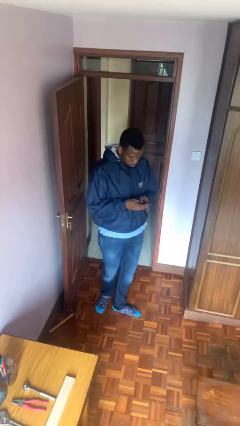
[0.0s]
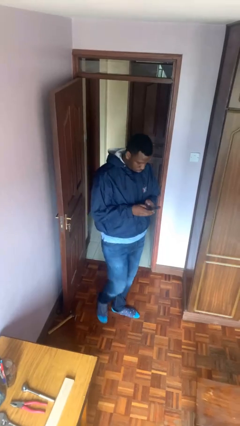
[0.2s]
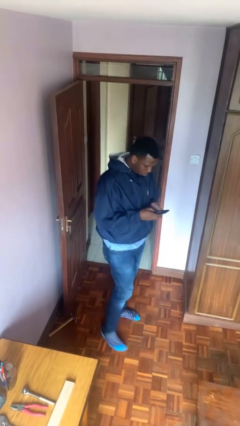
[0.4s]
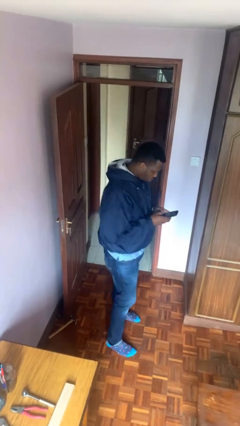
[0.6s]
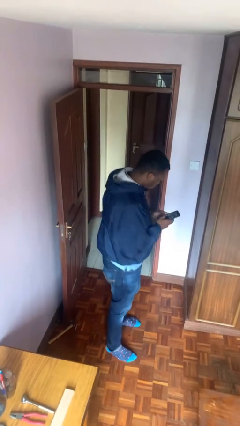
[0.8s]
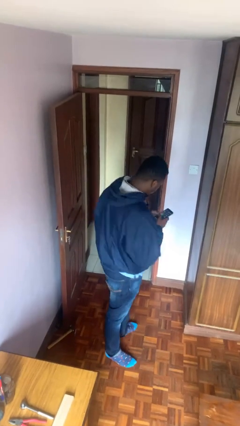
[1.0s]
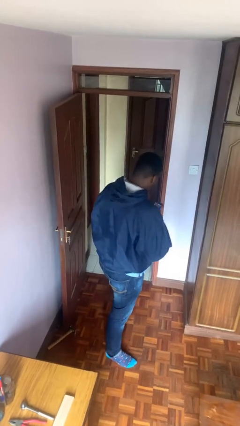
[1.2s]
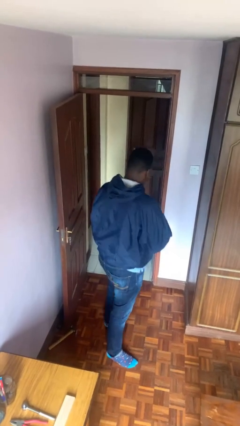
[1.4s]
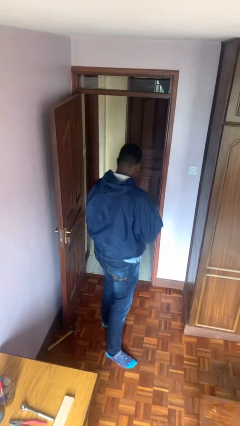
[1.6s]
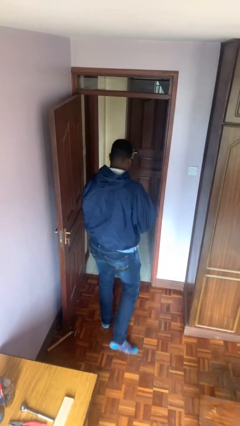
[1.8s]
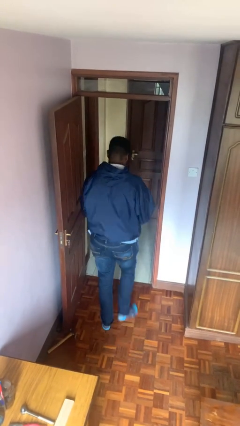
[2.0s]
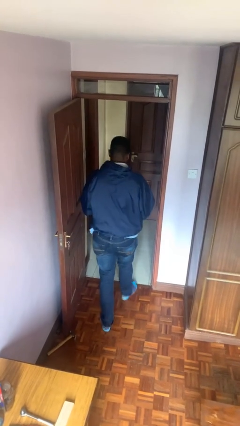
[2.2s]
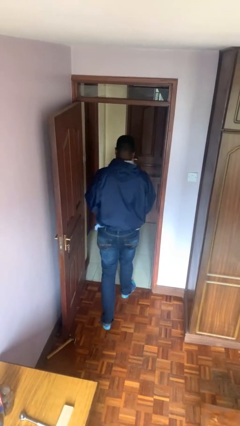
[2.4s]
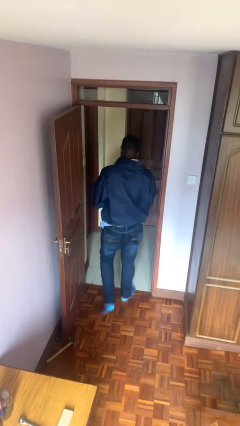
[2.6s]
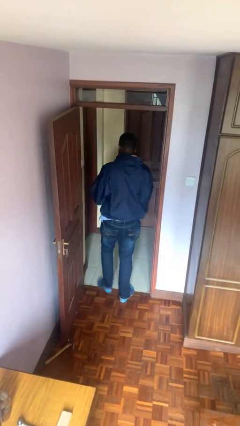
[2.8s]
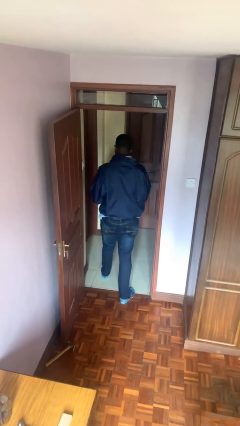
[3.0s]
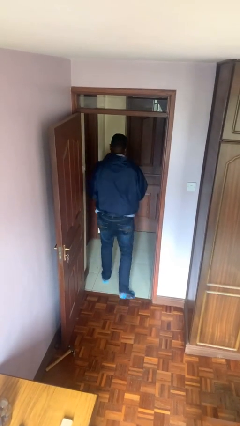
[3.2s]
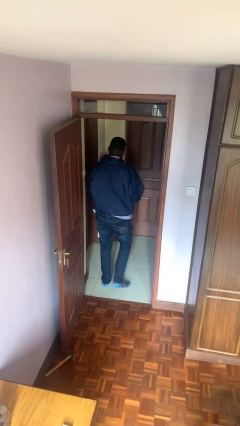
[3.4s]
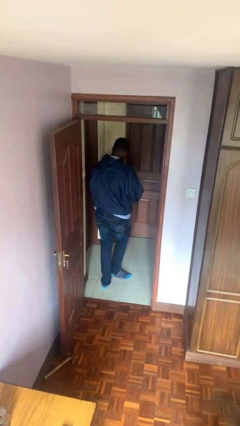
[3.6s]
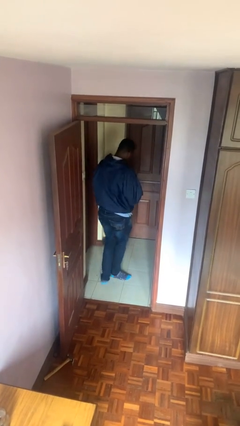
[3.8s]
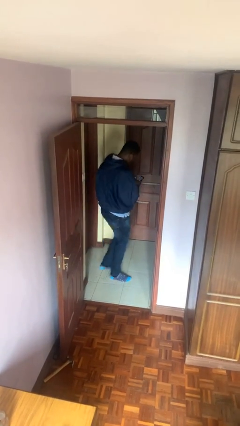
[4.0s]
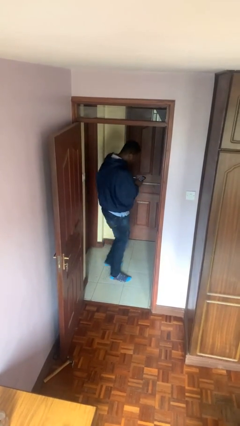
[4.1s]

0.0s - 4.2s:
person exits scene through structure

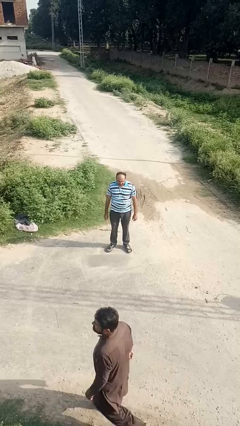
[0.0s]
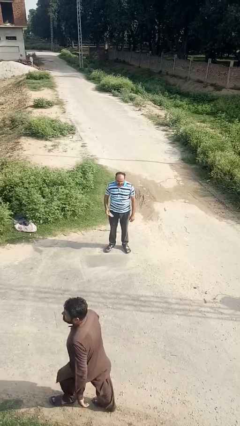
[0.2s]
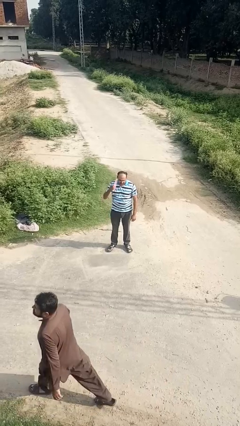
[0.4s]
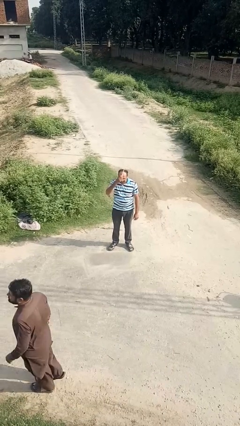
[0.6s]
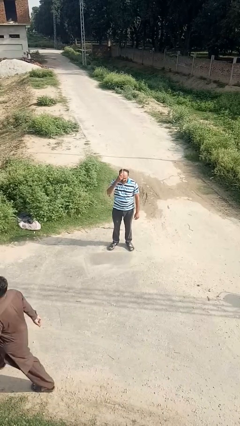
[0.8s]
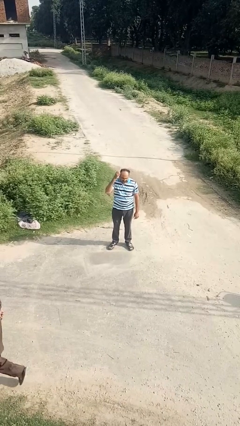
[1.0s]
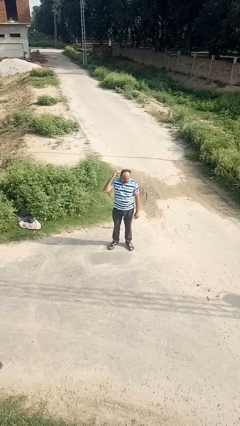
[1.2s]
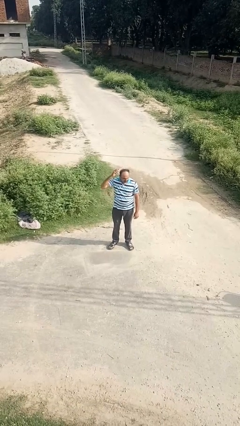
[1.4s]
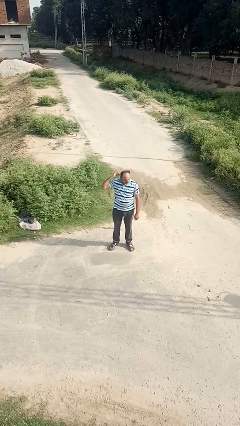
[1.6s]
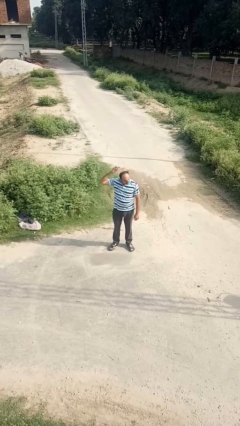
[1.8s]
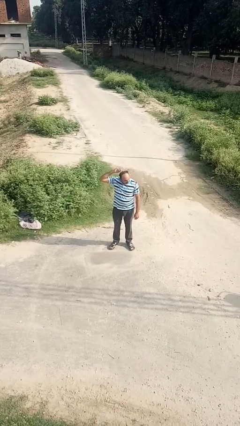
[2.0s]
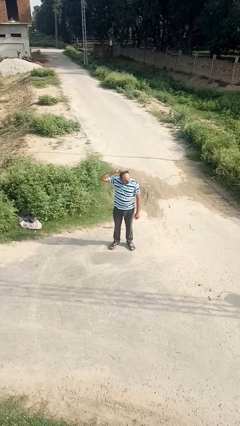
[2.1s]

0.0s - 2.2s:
person brushes hair

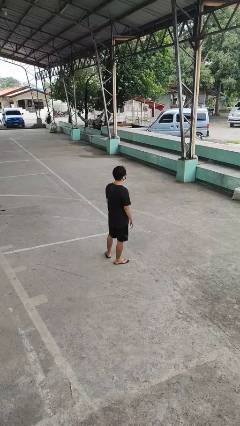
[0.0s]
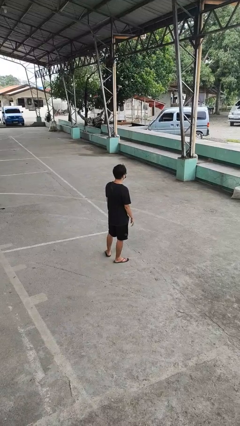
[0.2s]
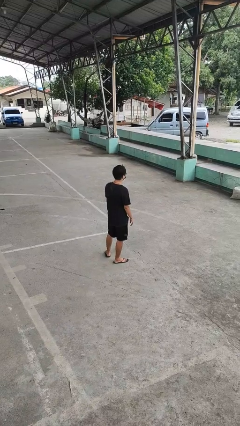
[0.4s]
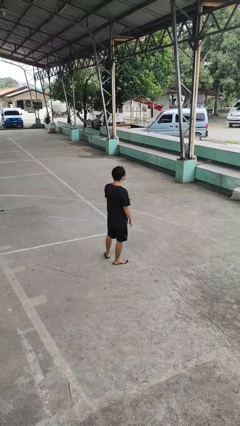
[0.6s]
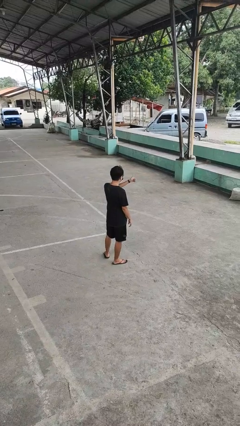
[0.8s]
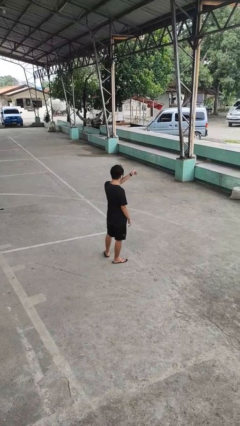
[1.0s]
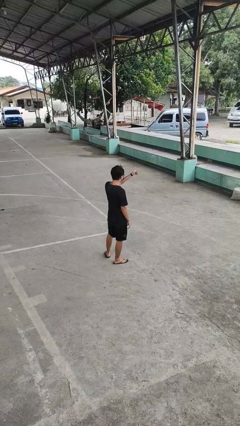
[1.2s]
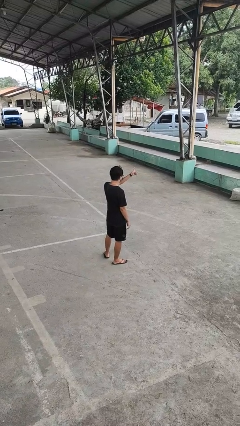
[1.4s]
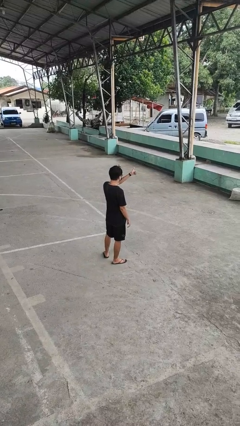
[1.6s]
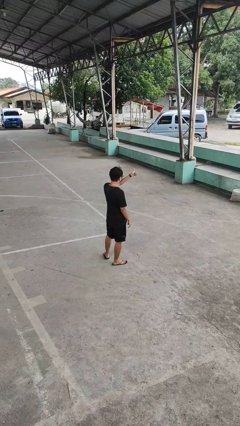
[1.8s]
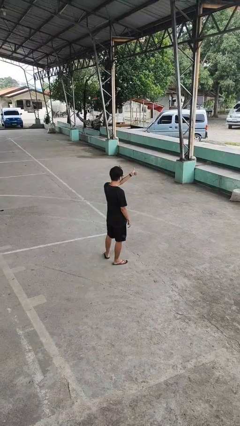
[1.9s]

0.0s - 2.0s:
person gestures thumbs up

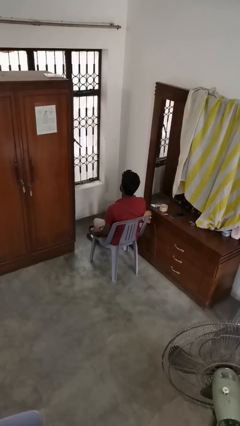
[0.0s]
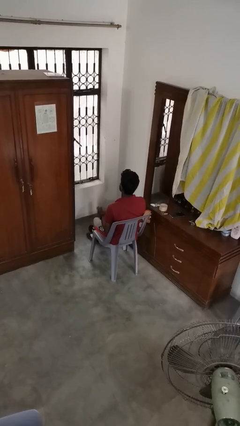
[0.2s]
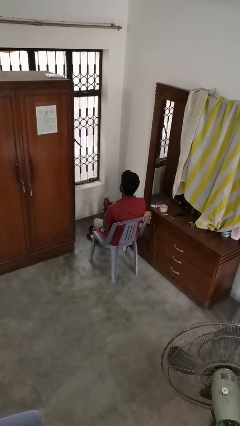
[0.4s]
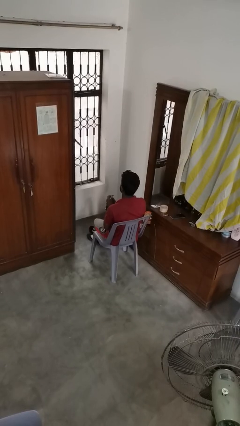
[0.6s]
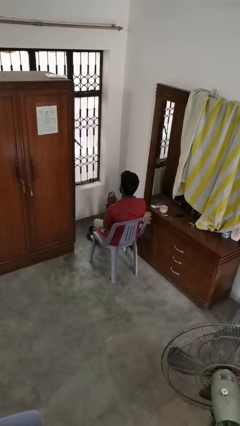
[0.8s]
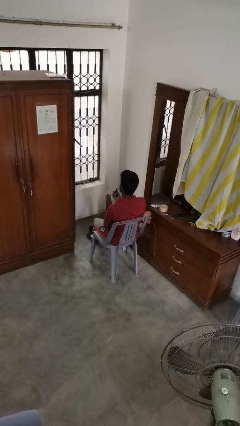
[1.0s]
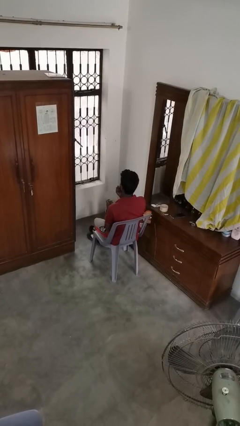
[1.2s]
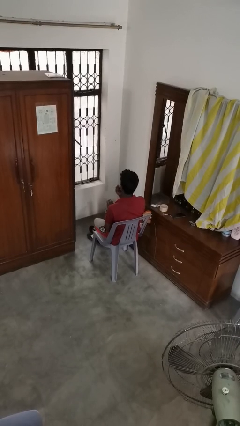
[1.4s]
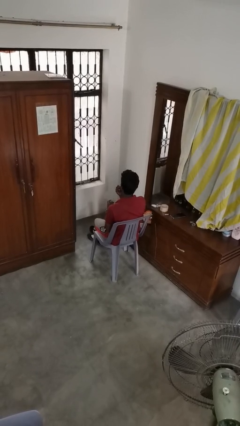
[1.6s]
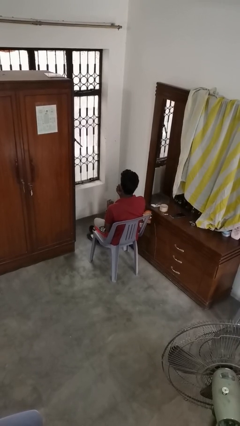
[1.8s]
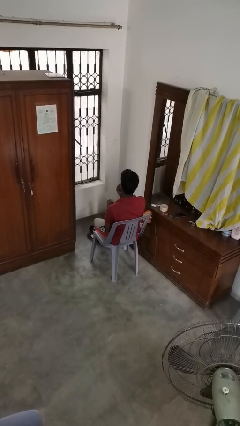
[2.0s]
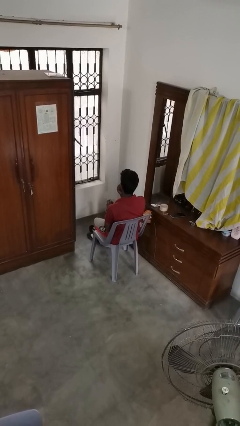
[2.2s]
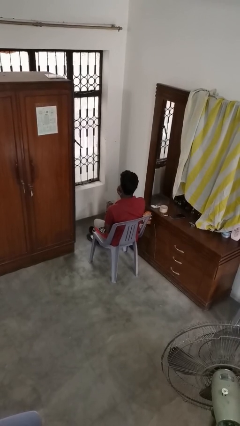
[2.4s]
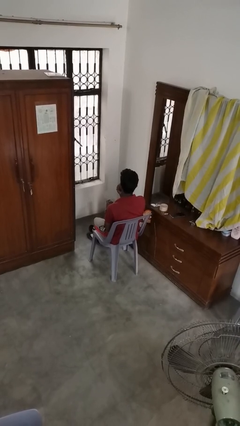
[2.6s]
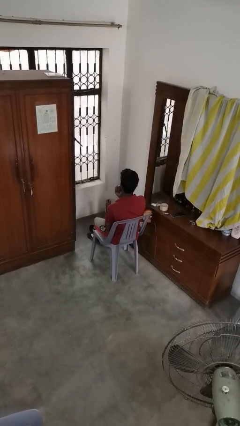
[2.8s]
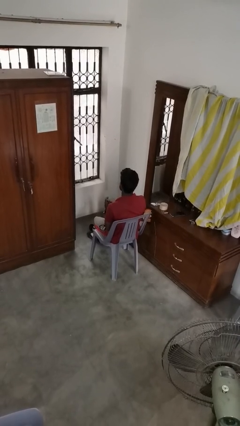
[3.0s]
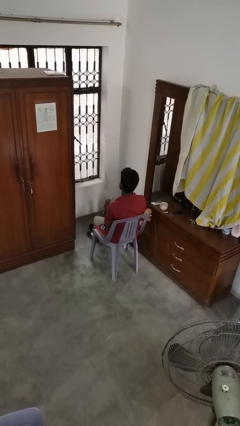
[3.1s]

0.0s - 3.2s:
person applies lip makeup

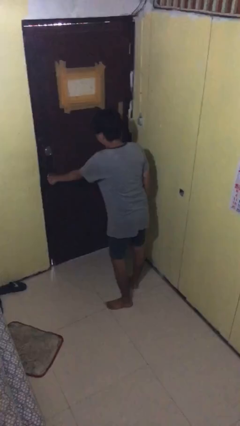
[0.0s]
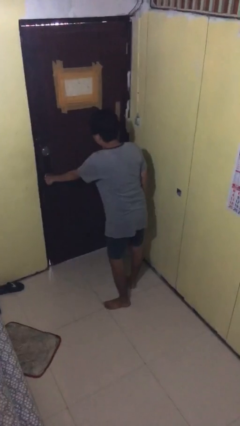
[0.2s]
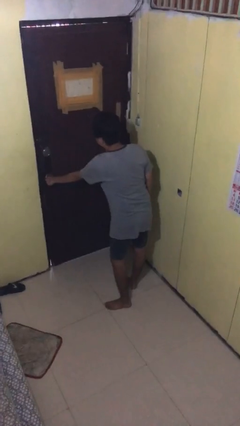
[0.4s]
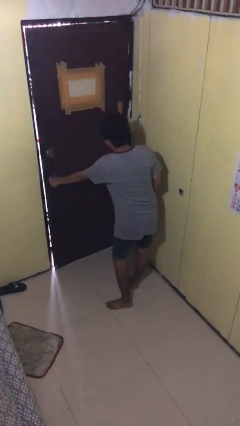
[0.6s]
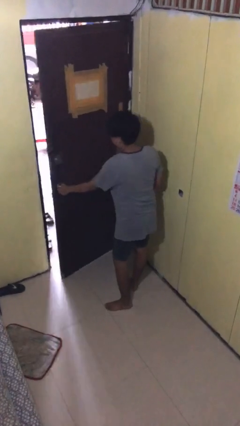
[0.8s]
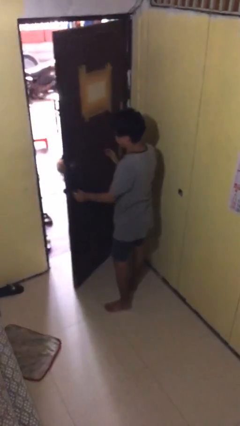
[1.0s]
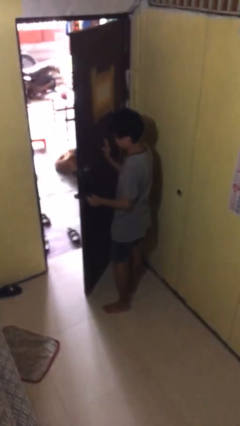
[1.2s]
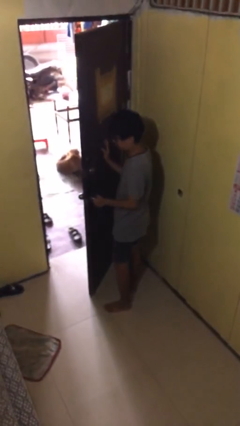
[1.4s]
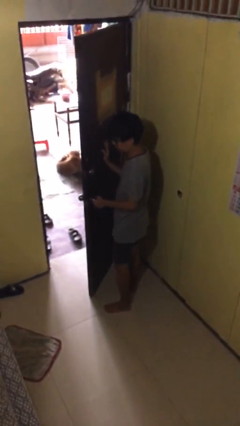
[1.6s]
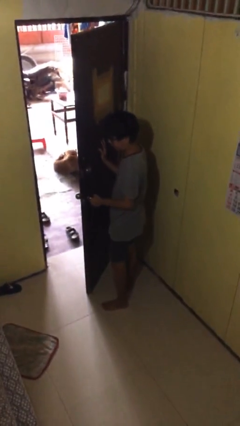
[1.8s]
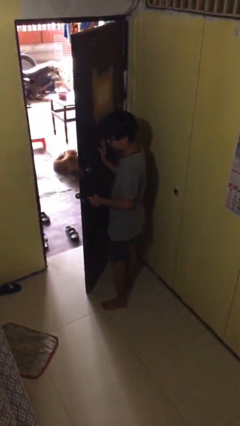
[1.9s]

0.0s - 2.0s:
person opens facility door

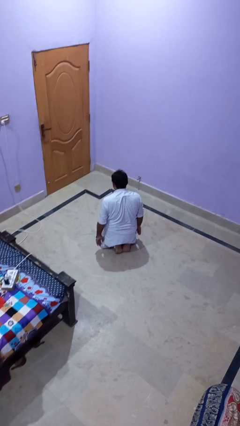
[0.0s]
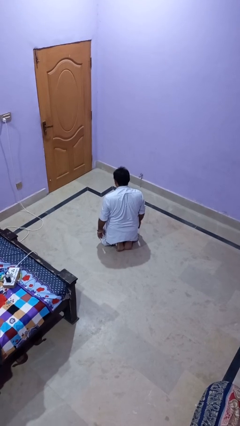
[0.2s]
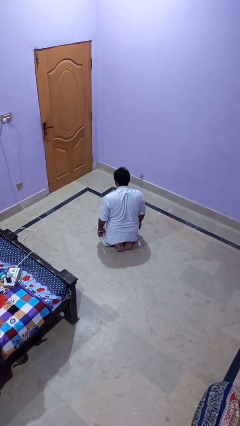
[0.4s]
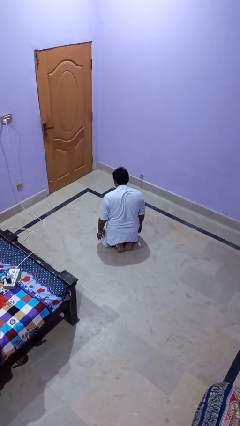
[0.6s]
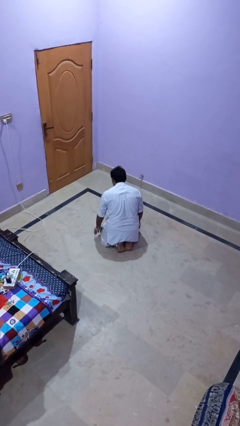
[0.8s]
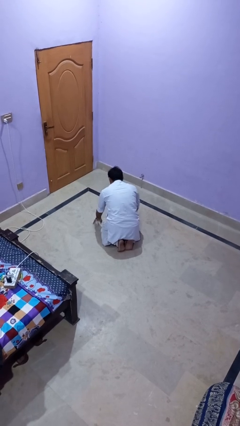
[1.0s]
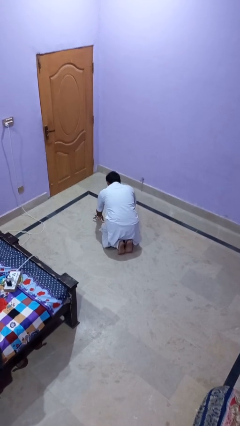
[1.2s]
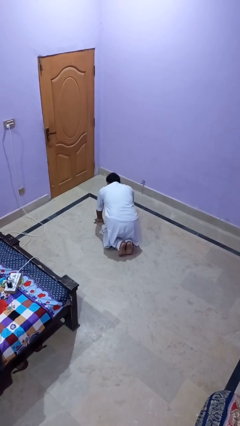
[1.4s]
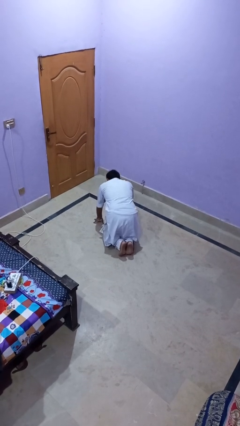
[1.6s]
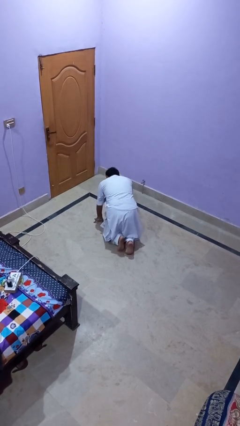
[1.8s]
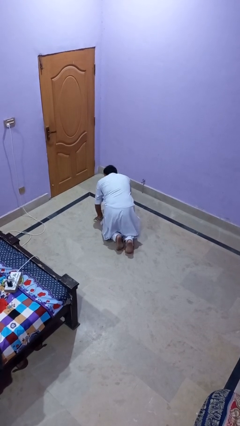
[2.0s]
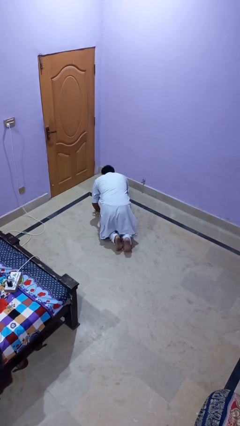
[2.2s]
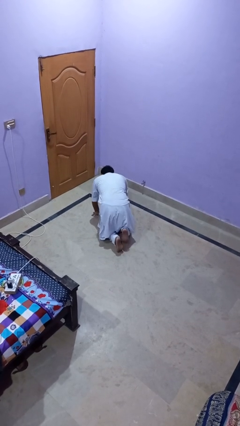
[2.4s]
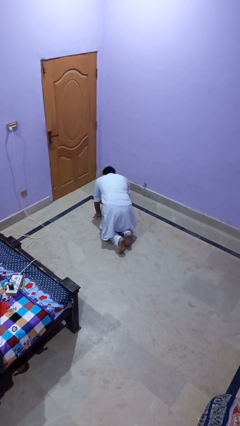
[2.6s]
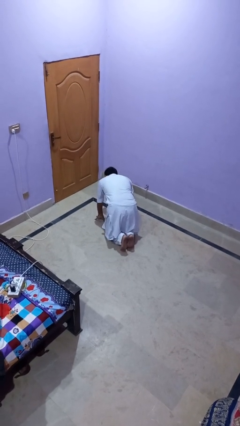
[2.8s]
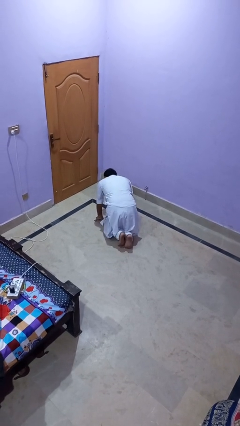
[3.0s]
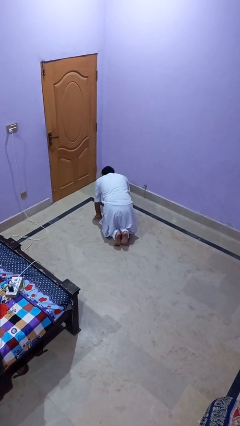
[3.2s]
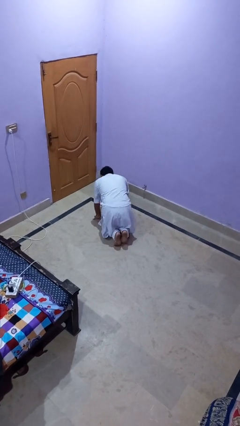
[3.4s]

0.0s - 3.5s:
person crawls

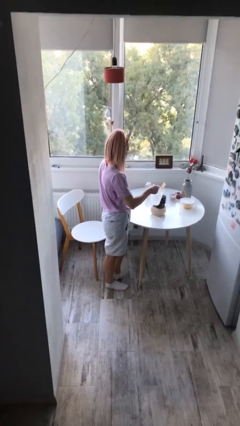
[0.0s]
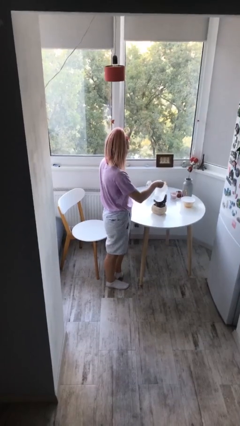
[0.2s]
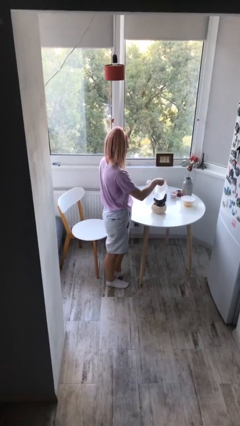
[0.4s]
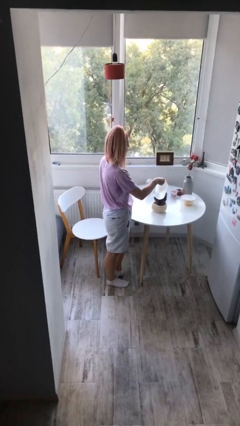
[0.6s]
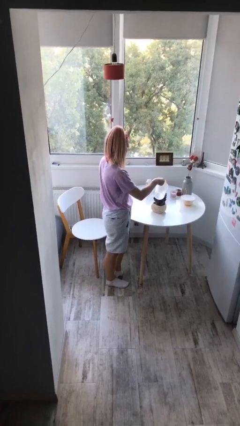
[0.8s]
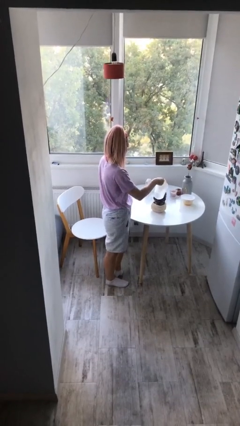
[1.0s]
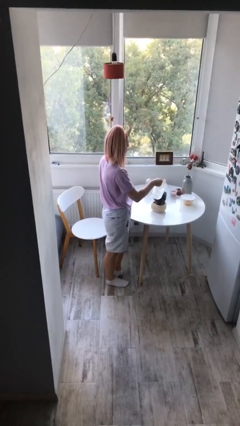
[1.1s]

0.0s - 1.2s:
person waters houseplant
